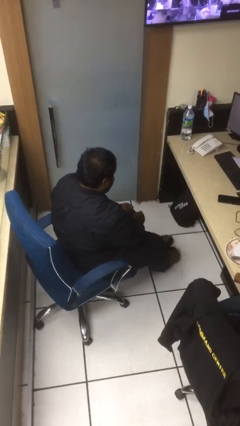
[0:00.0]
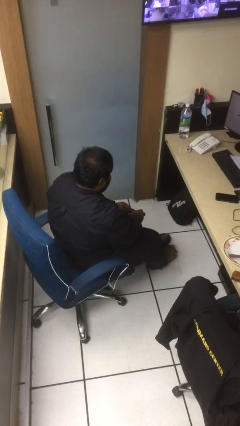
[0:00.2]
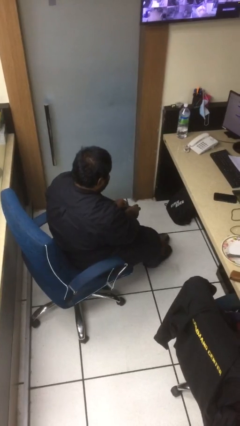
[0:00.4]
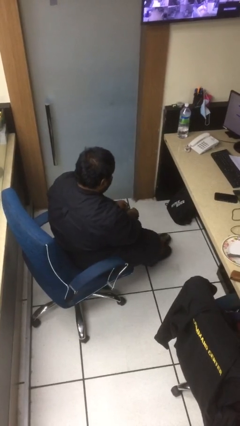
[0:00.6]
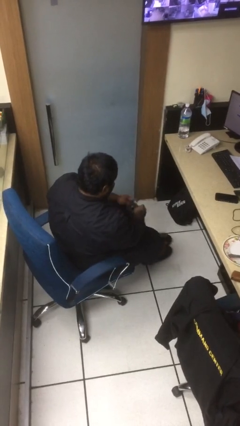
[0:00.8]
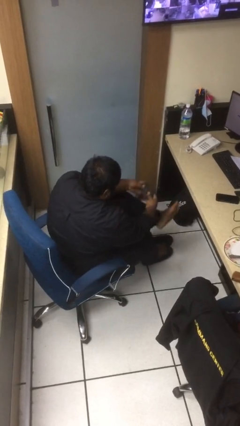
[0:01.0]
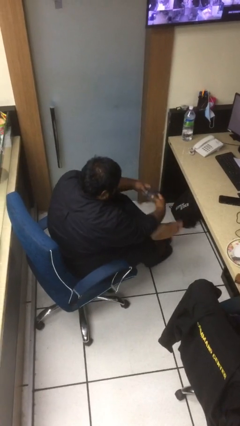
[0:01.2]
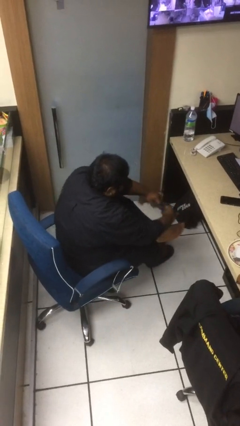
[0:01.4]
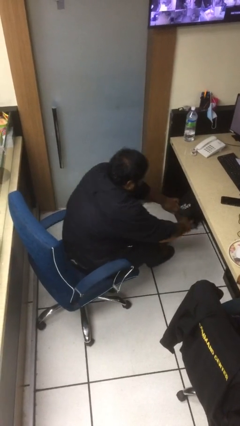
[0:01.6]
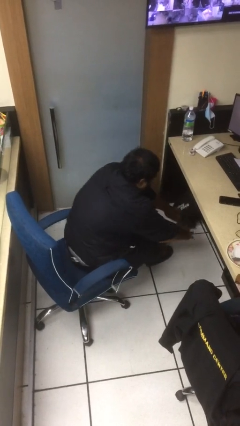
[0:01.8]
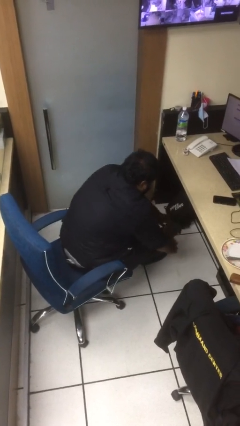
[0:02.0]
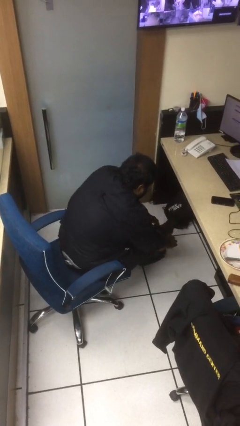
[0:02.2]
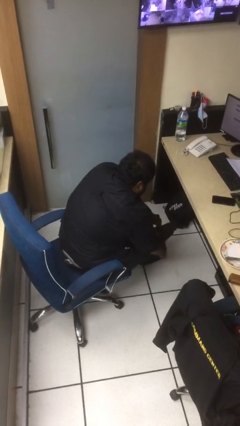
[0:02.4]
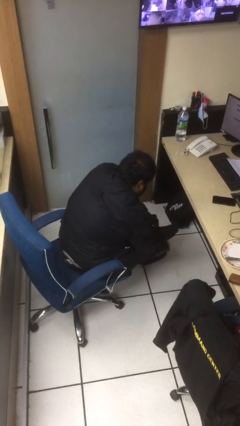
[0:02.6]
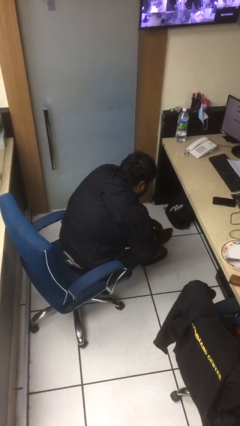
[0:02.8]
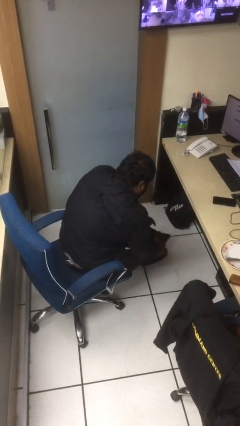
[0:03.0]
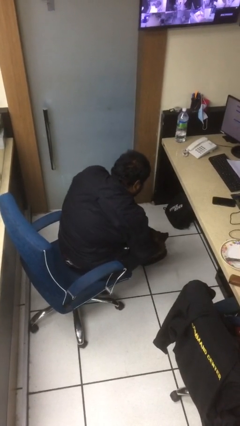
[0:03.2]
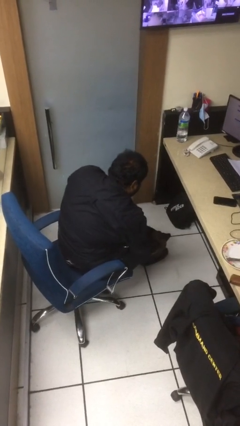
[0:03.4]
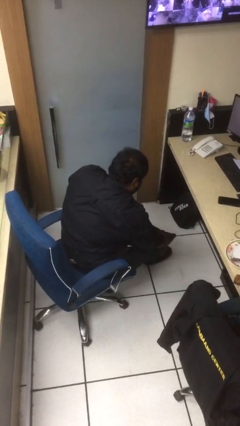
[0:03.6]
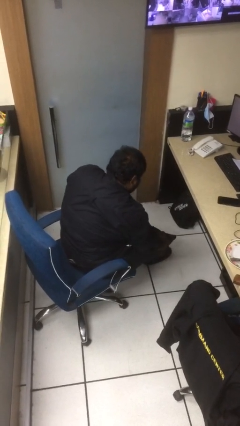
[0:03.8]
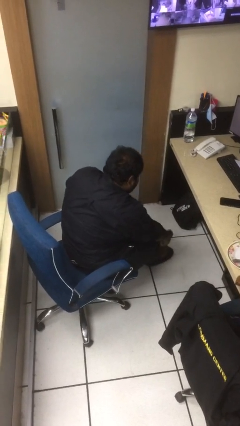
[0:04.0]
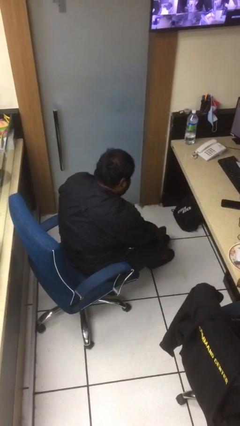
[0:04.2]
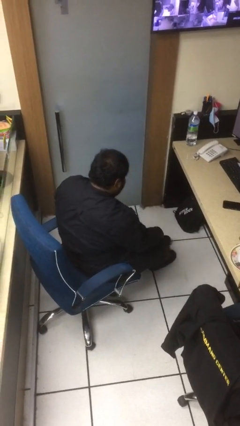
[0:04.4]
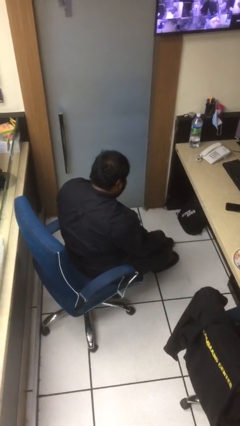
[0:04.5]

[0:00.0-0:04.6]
person puts on socks

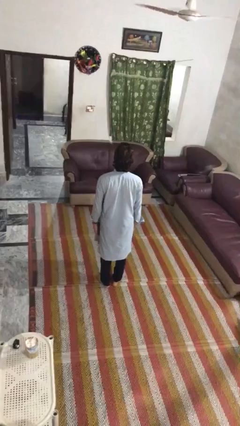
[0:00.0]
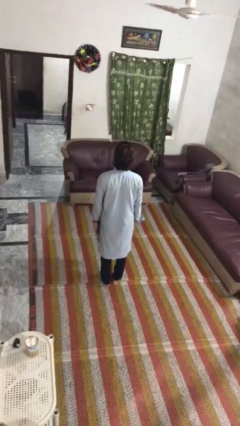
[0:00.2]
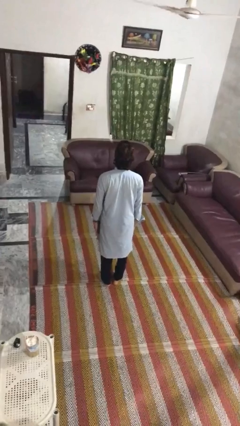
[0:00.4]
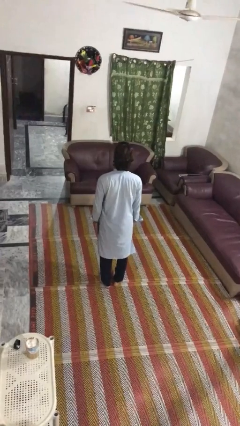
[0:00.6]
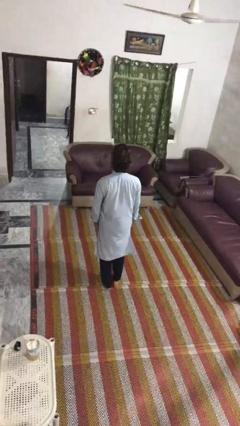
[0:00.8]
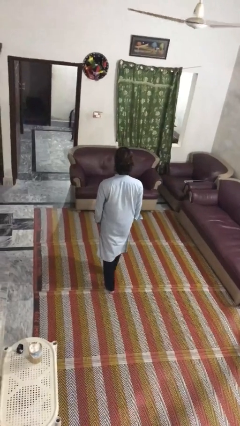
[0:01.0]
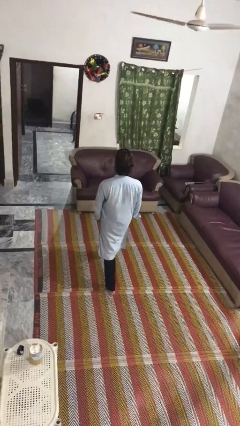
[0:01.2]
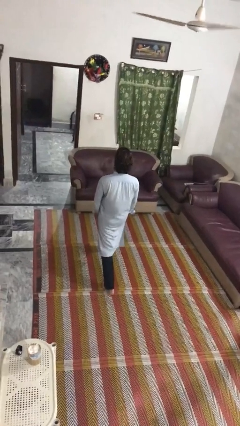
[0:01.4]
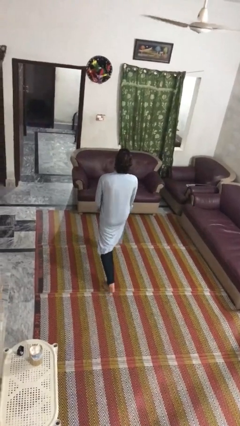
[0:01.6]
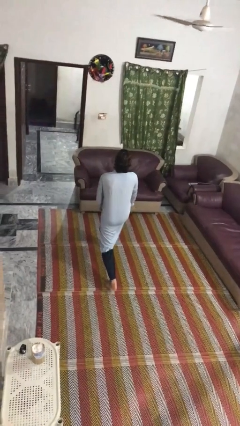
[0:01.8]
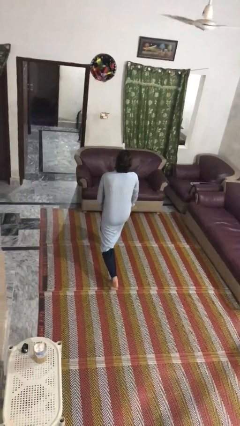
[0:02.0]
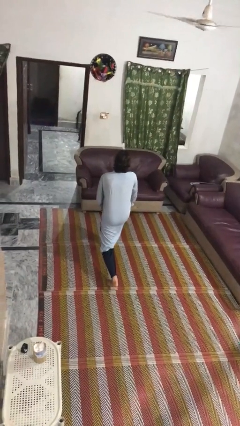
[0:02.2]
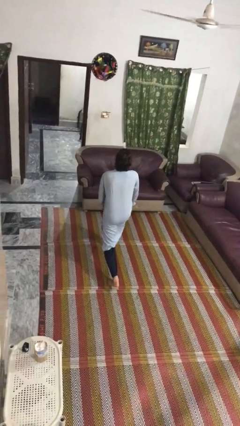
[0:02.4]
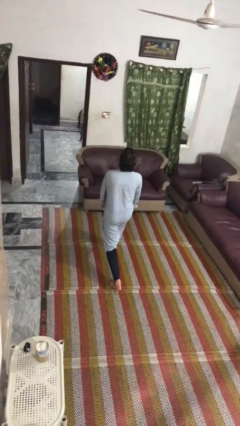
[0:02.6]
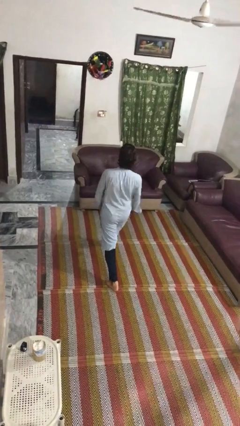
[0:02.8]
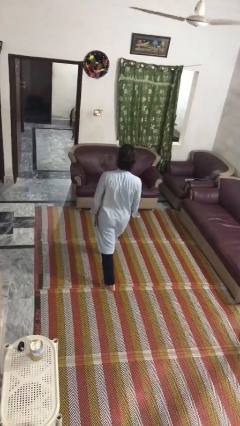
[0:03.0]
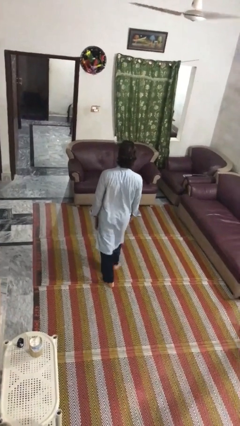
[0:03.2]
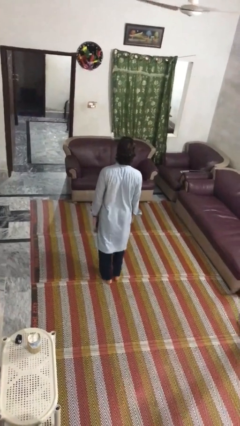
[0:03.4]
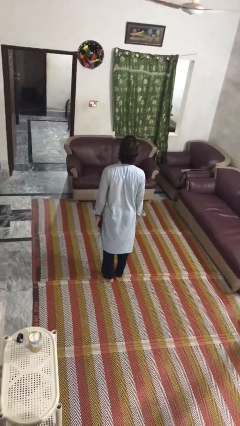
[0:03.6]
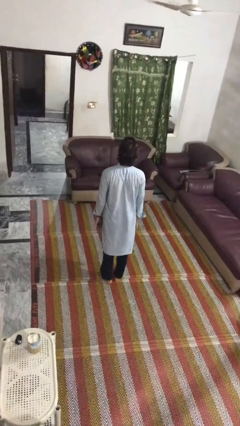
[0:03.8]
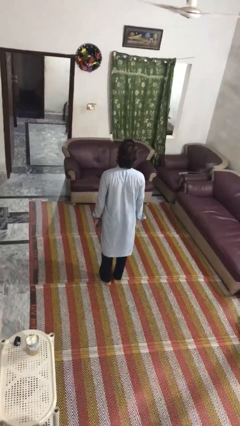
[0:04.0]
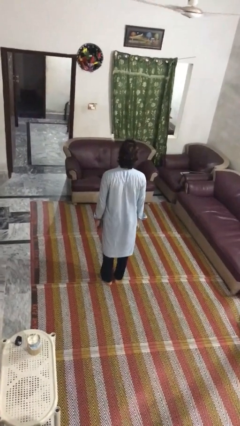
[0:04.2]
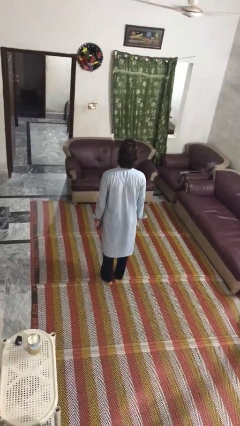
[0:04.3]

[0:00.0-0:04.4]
person exercises with lunges

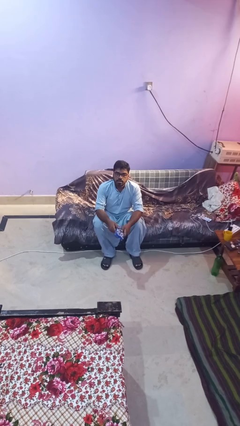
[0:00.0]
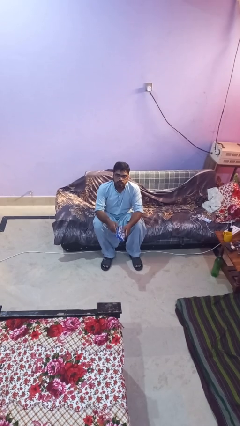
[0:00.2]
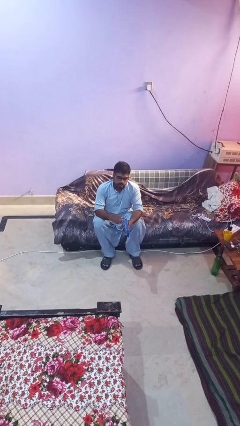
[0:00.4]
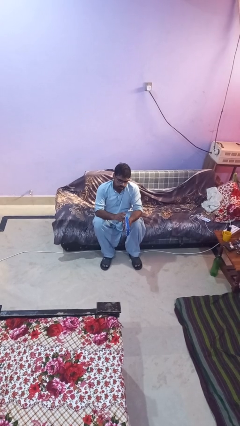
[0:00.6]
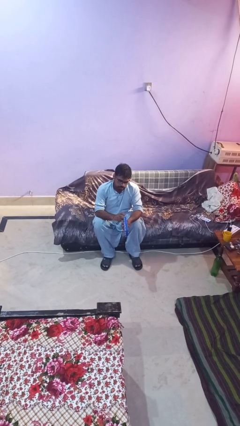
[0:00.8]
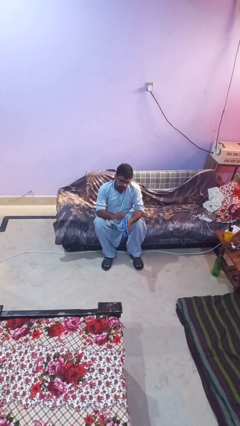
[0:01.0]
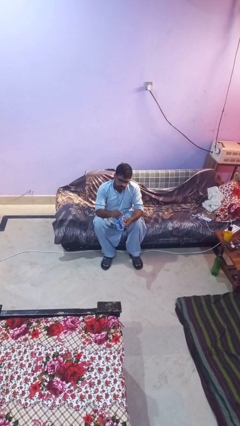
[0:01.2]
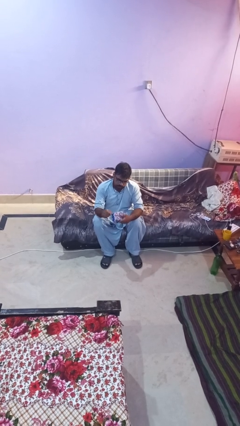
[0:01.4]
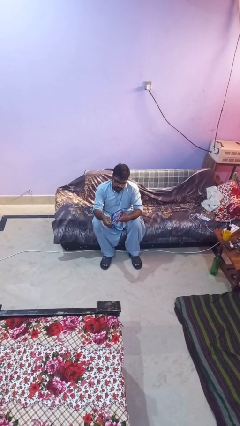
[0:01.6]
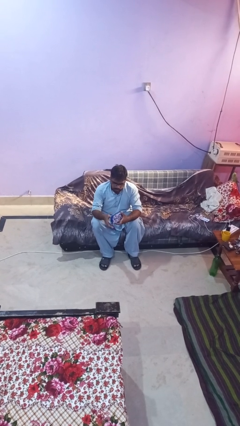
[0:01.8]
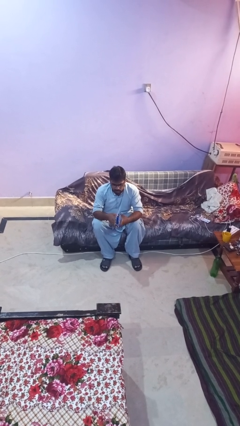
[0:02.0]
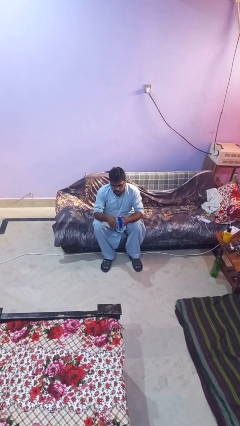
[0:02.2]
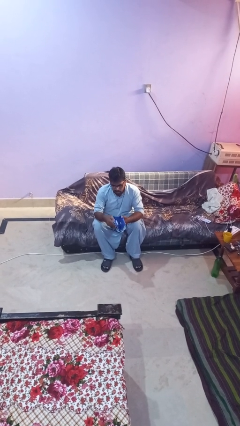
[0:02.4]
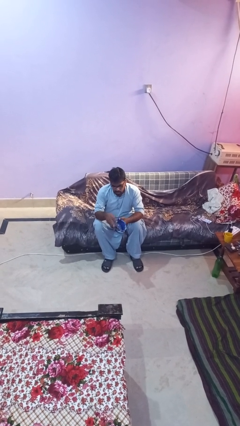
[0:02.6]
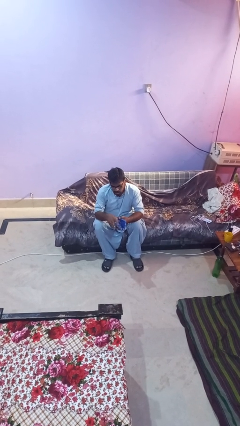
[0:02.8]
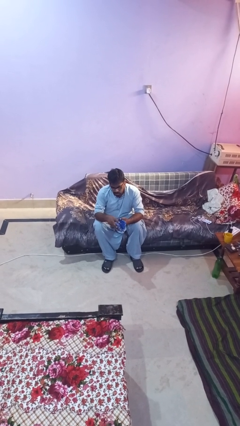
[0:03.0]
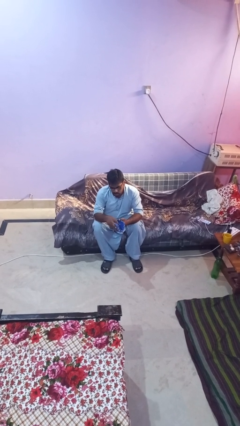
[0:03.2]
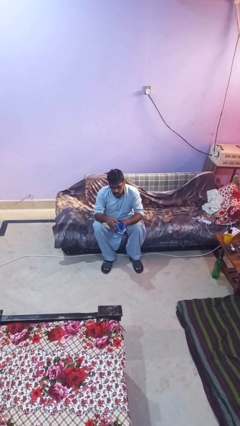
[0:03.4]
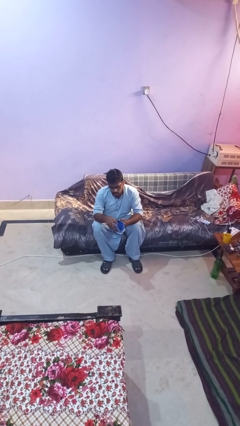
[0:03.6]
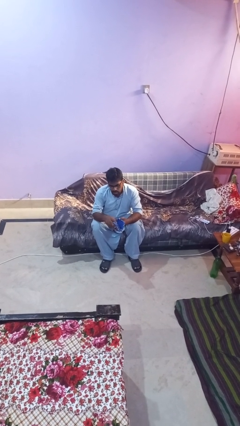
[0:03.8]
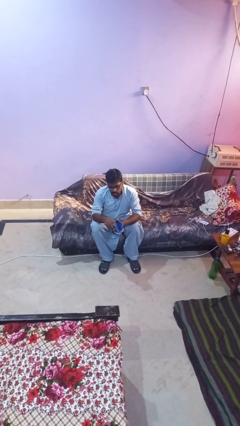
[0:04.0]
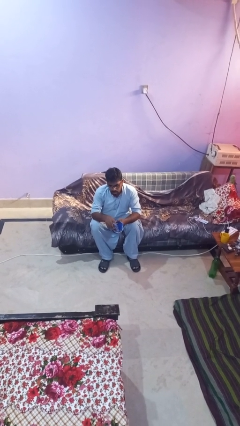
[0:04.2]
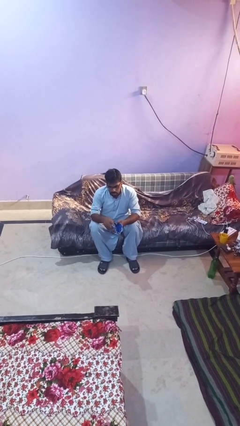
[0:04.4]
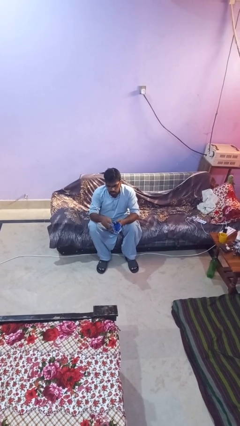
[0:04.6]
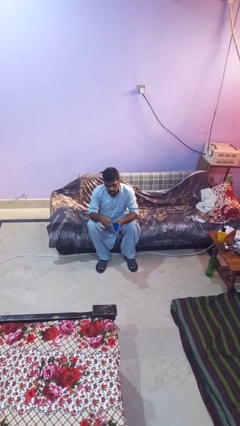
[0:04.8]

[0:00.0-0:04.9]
person searches in purse

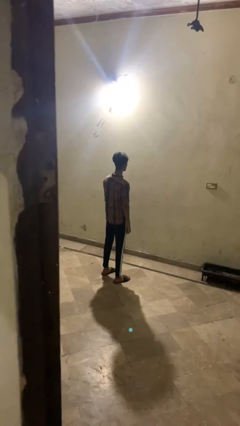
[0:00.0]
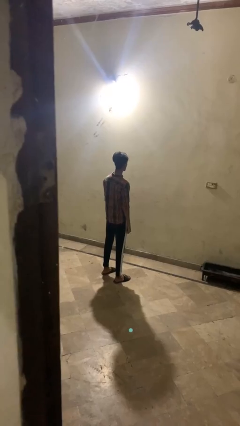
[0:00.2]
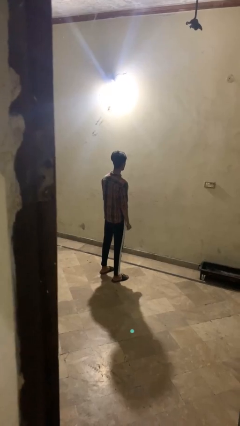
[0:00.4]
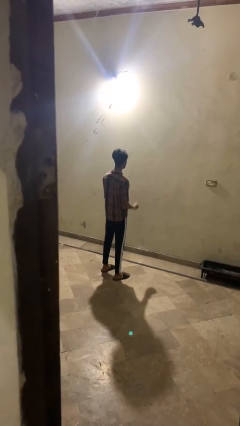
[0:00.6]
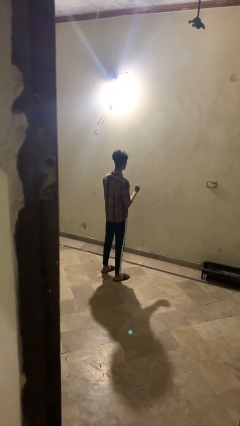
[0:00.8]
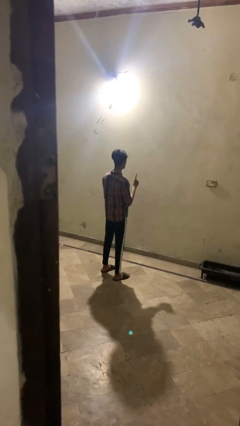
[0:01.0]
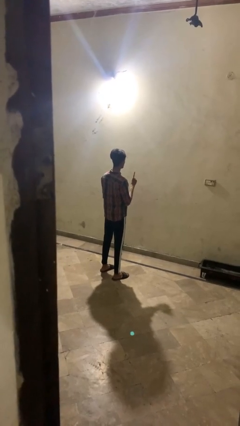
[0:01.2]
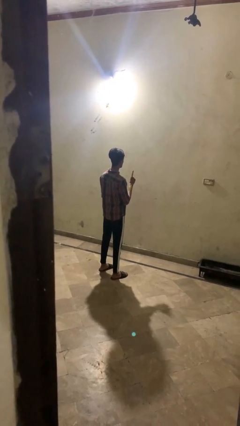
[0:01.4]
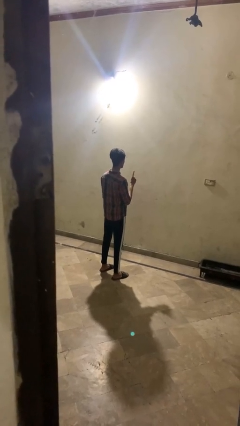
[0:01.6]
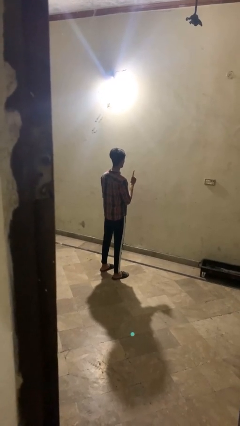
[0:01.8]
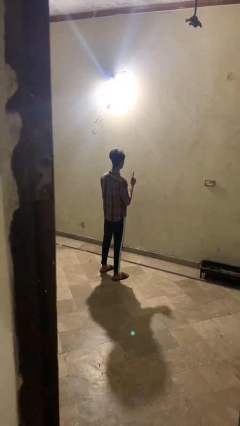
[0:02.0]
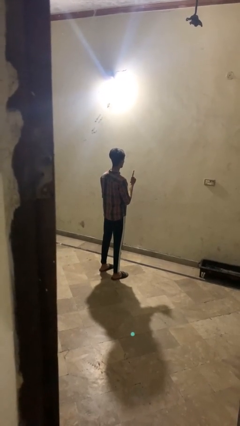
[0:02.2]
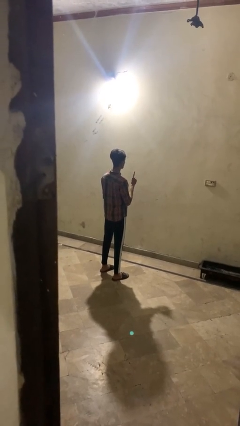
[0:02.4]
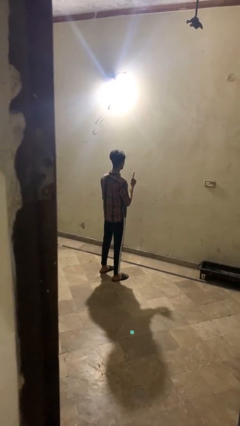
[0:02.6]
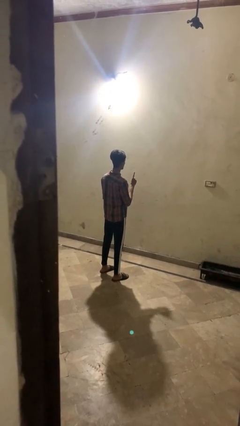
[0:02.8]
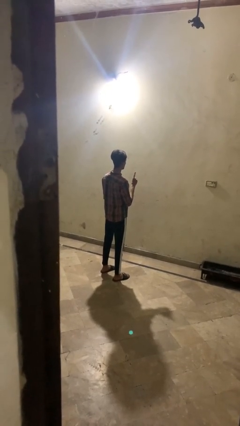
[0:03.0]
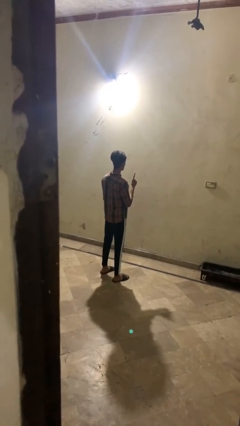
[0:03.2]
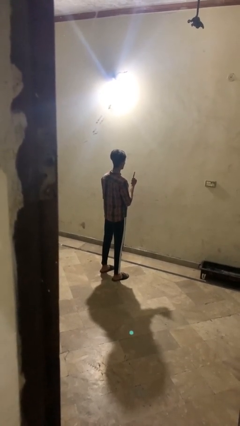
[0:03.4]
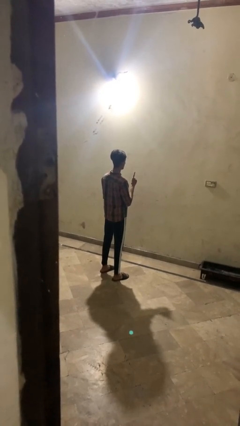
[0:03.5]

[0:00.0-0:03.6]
person gestures number one

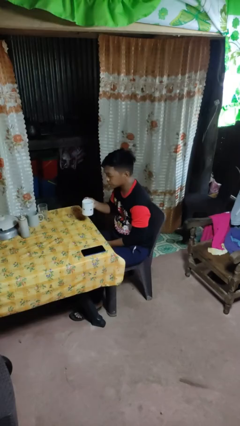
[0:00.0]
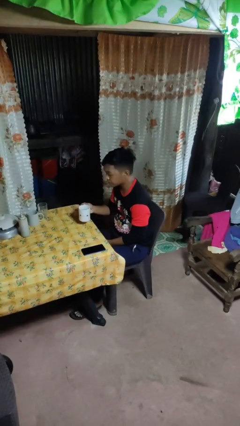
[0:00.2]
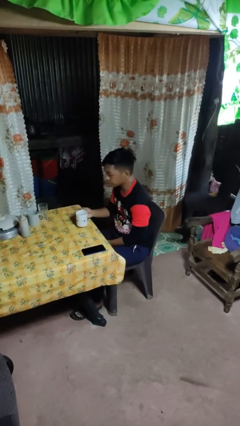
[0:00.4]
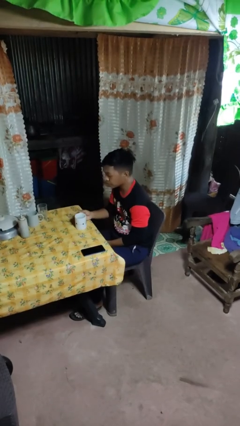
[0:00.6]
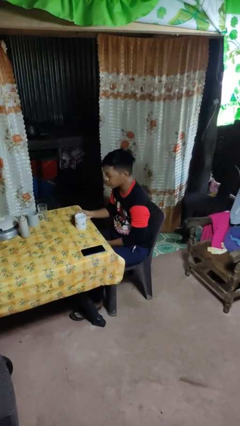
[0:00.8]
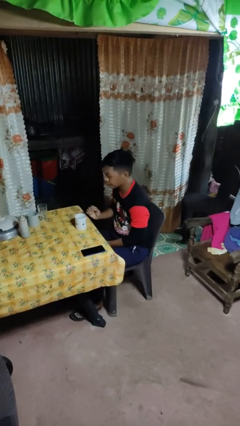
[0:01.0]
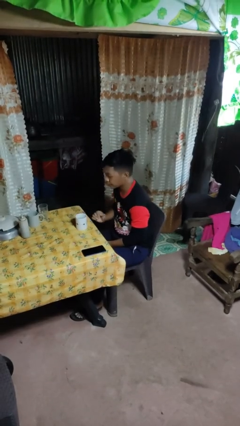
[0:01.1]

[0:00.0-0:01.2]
person puts down object on table
